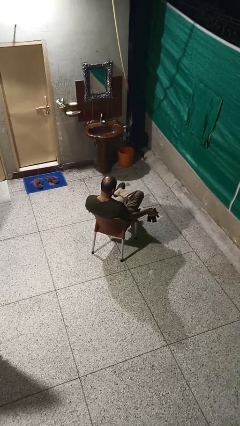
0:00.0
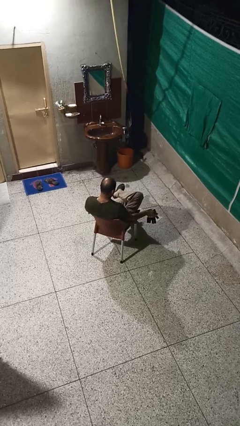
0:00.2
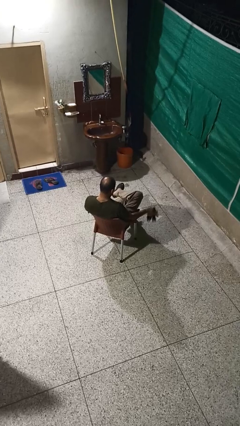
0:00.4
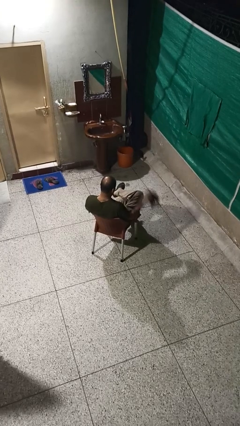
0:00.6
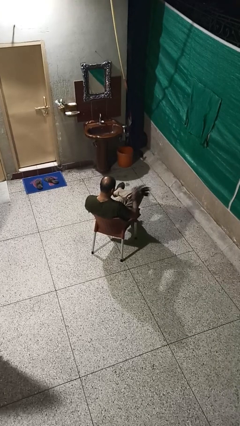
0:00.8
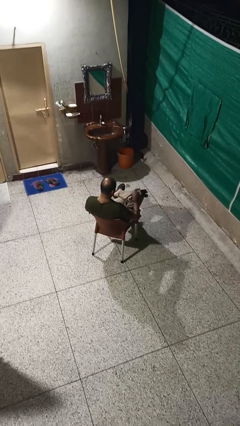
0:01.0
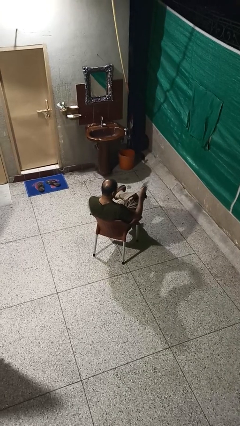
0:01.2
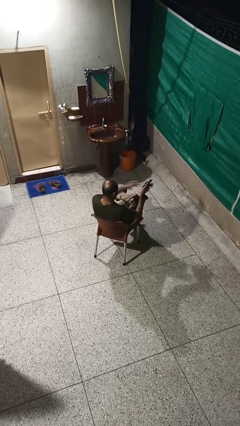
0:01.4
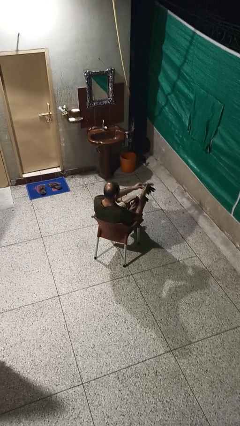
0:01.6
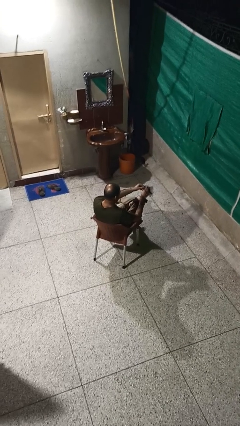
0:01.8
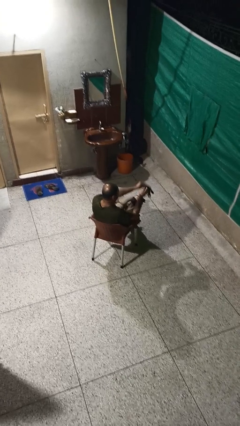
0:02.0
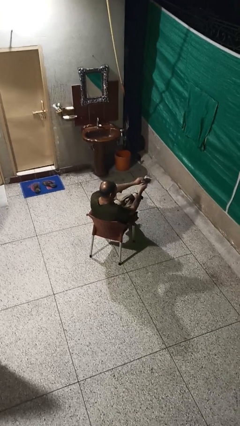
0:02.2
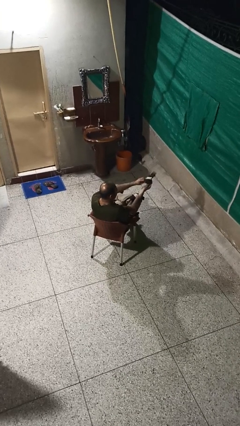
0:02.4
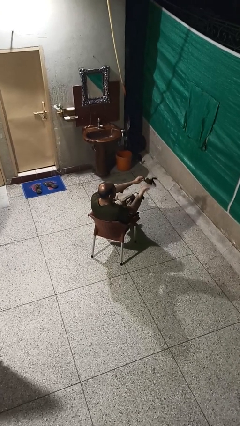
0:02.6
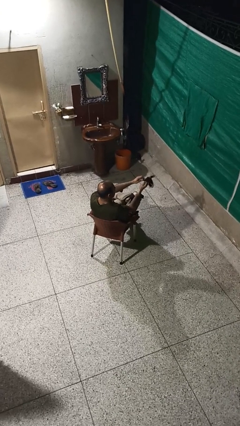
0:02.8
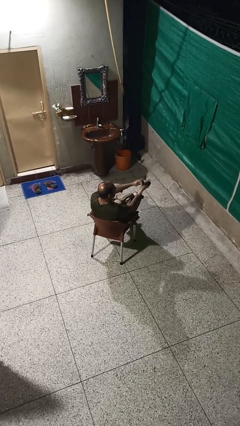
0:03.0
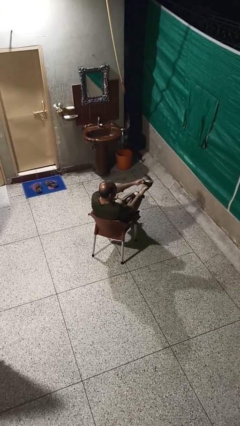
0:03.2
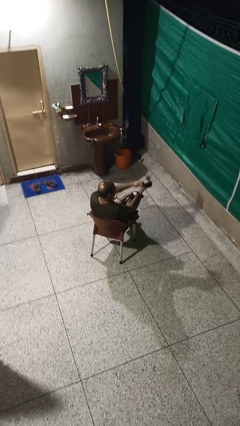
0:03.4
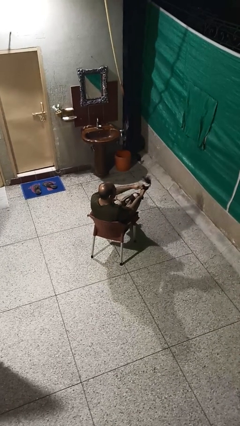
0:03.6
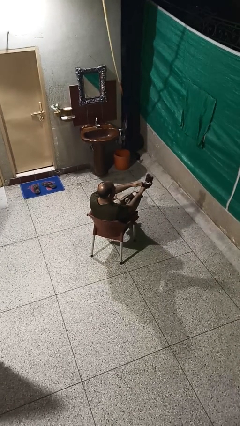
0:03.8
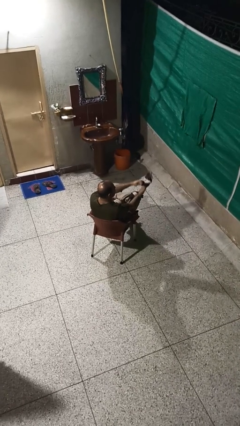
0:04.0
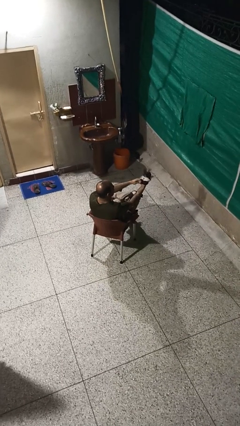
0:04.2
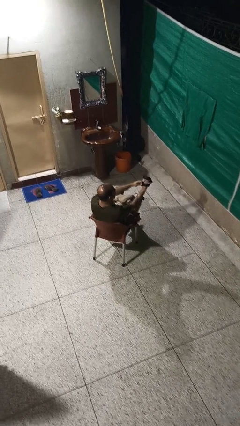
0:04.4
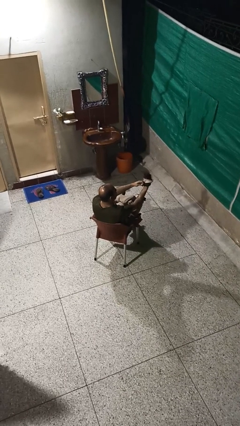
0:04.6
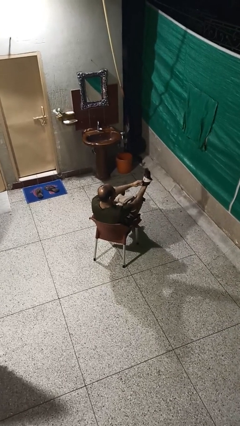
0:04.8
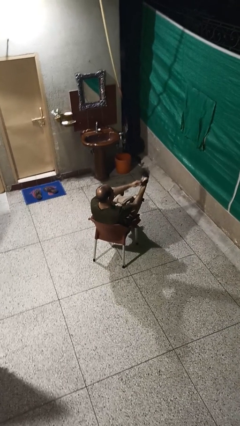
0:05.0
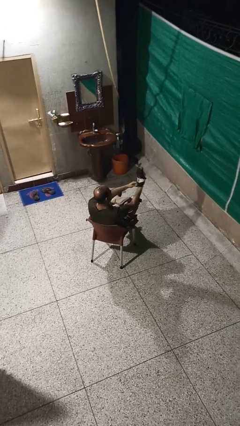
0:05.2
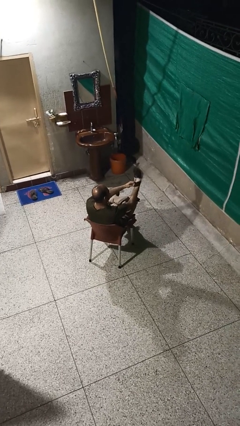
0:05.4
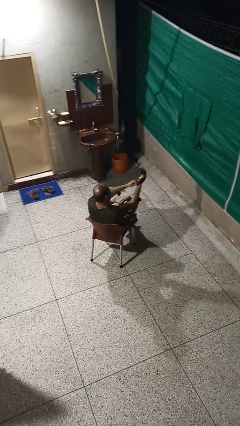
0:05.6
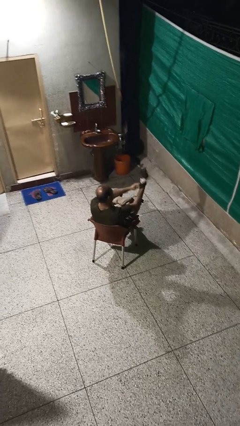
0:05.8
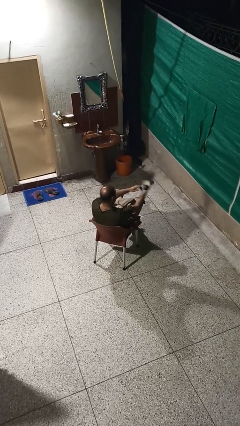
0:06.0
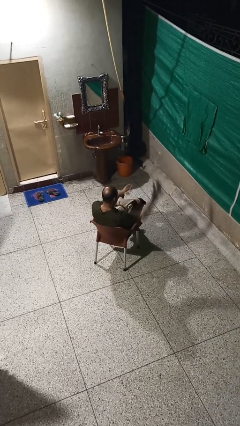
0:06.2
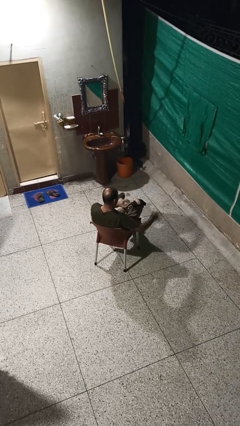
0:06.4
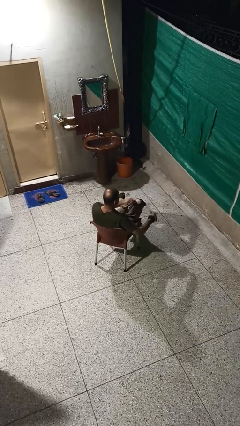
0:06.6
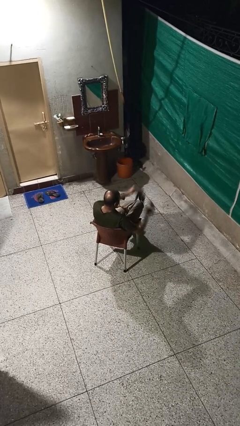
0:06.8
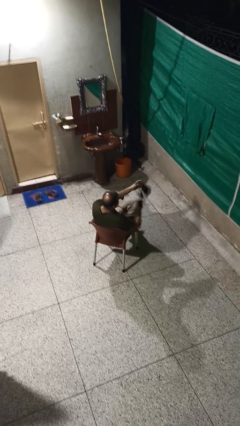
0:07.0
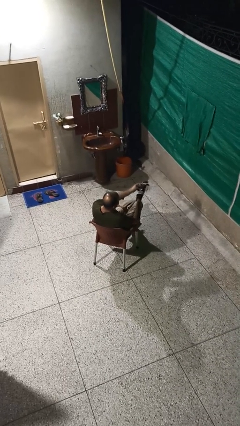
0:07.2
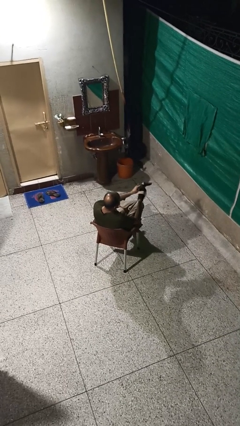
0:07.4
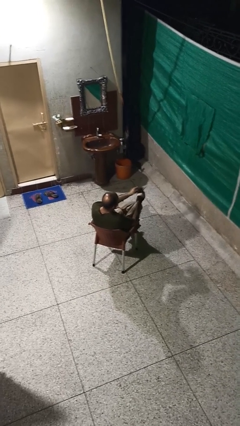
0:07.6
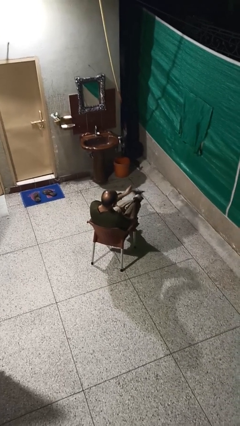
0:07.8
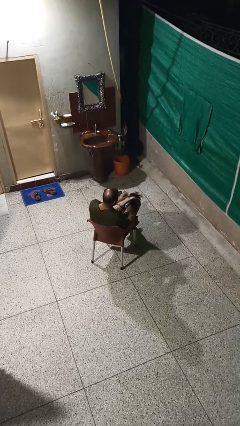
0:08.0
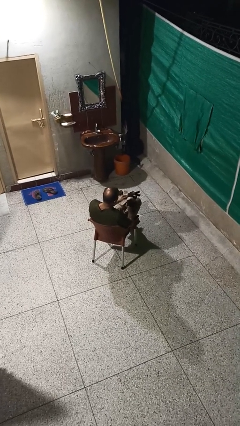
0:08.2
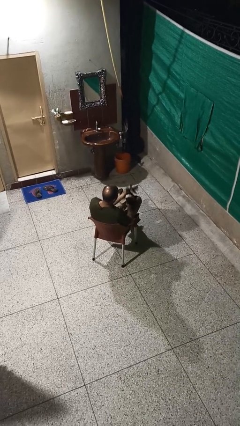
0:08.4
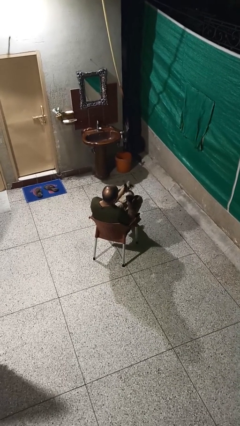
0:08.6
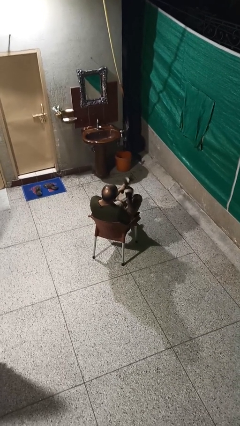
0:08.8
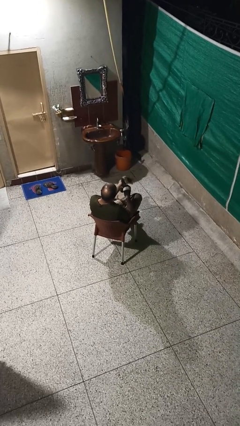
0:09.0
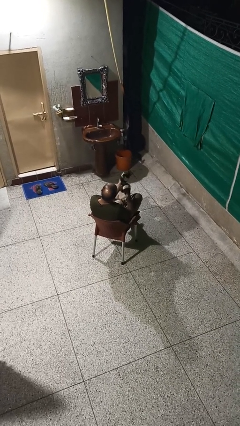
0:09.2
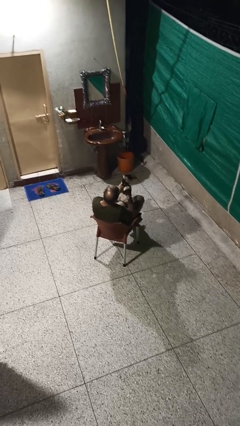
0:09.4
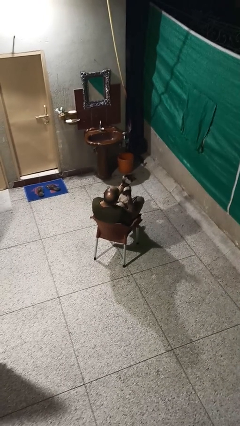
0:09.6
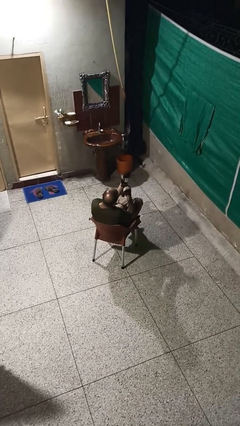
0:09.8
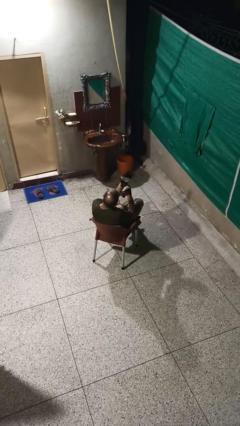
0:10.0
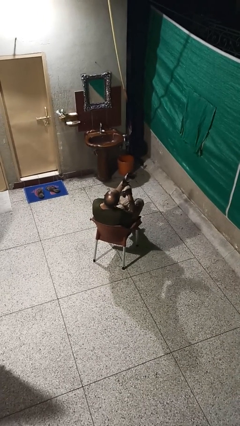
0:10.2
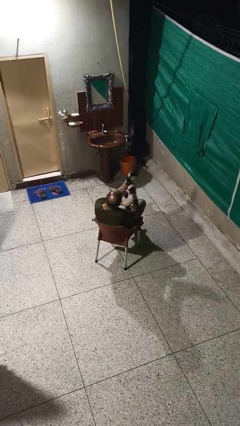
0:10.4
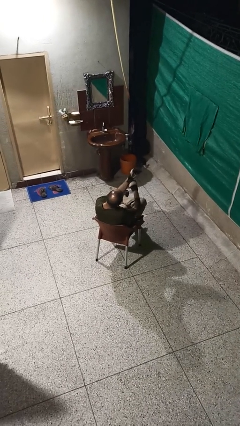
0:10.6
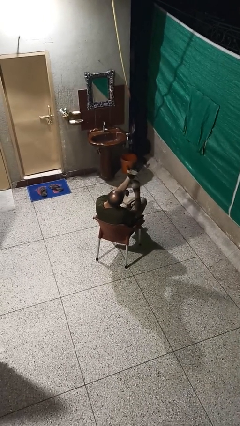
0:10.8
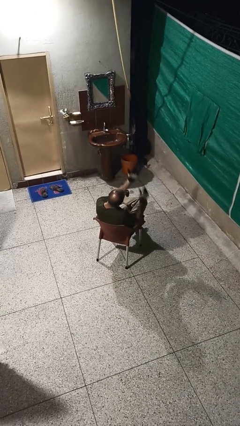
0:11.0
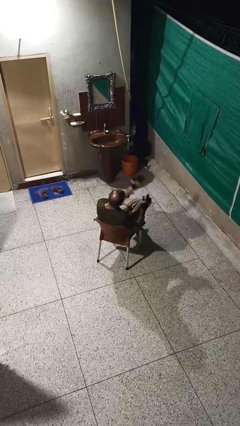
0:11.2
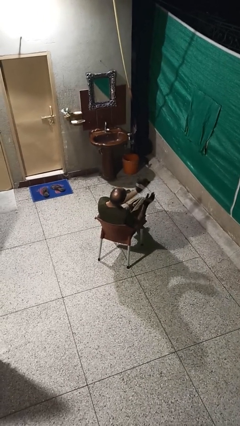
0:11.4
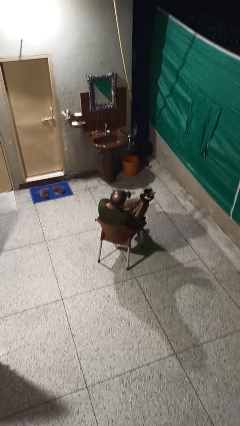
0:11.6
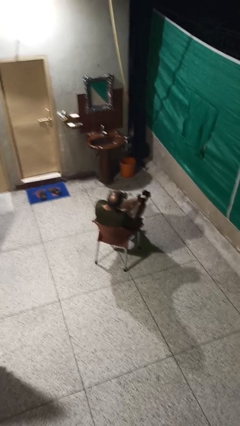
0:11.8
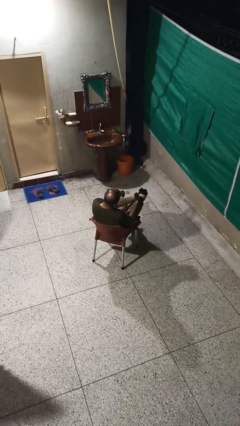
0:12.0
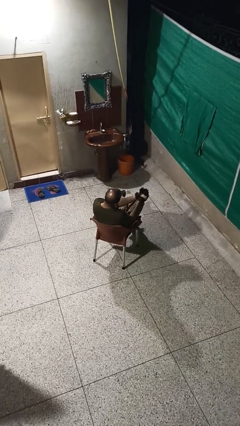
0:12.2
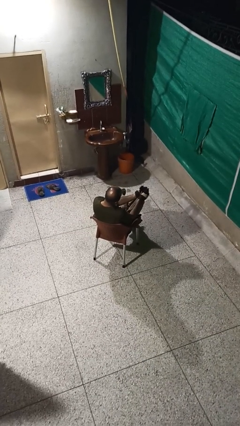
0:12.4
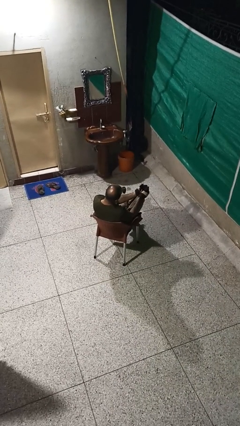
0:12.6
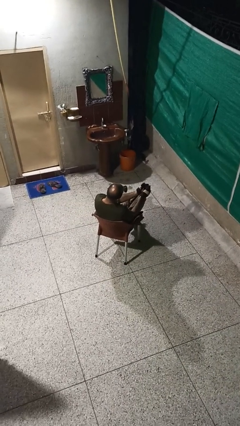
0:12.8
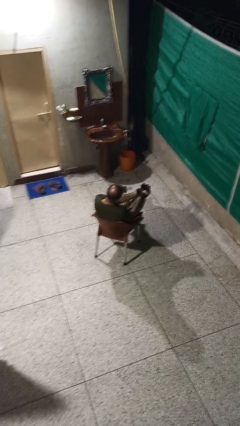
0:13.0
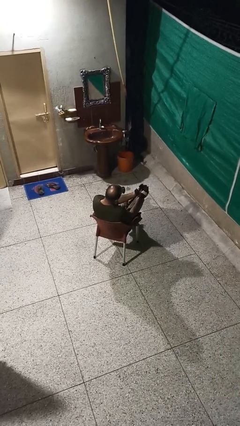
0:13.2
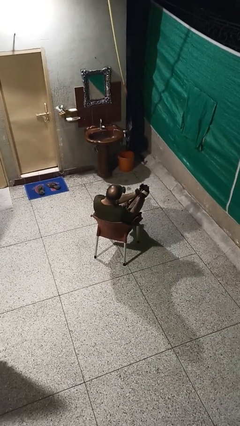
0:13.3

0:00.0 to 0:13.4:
person puts on gloves

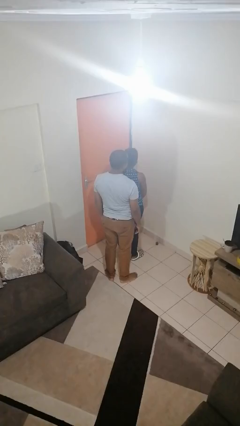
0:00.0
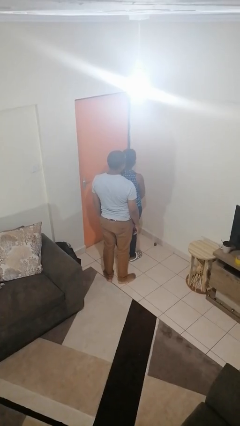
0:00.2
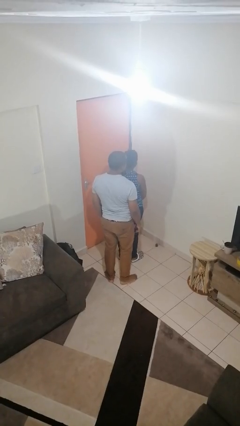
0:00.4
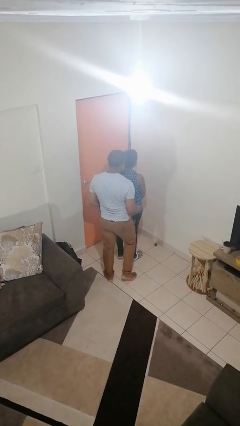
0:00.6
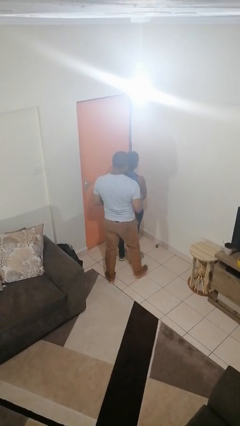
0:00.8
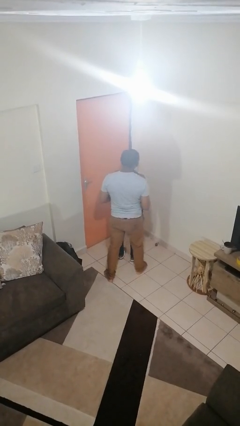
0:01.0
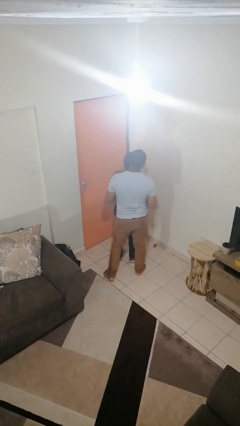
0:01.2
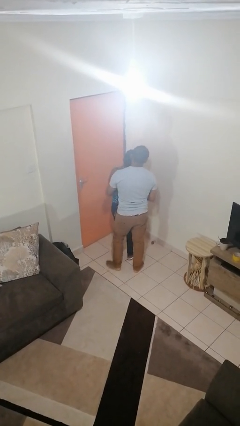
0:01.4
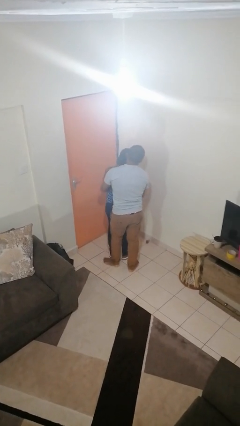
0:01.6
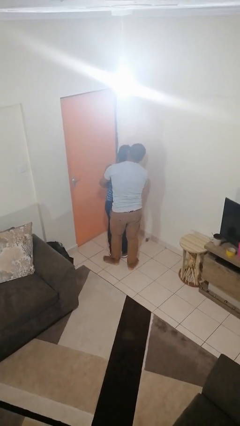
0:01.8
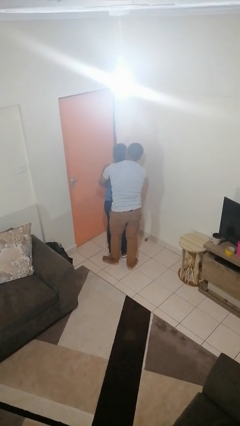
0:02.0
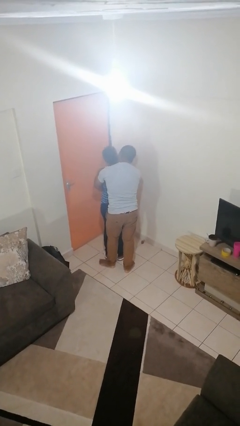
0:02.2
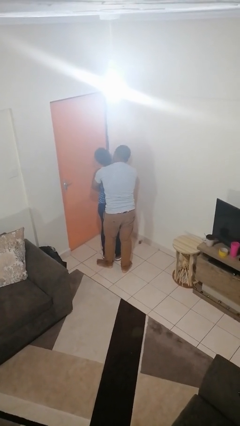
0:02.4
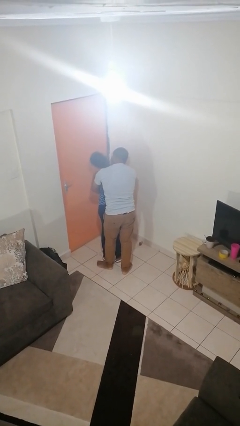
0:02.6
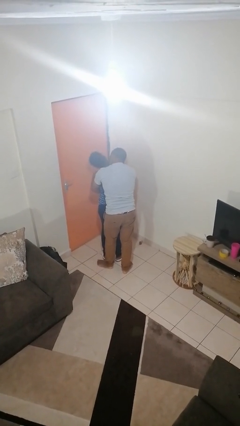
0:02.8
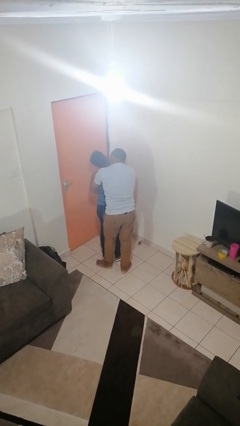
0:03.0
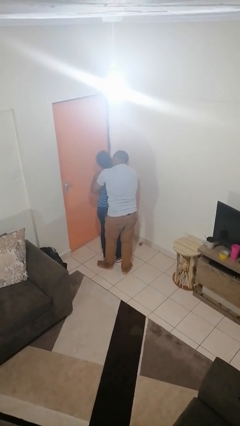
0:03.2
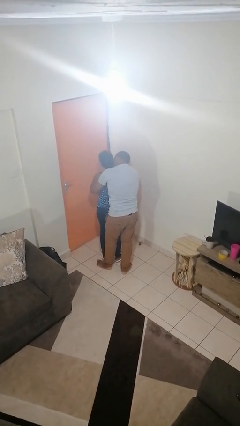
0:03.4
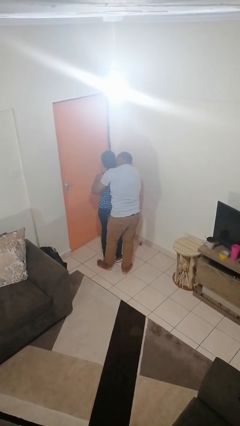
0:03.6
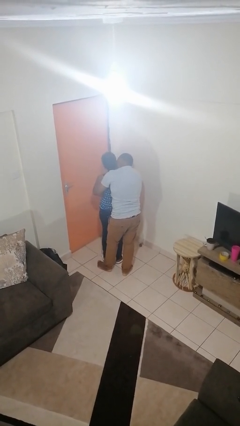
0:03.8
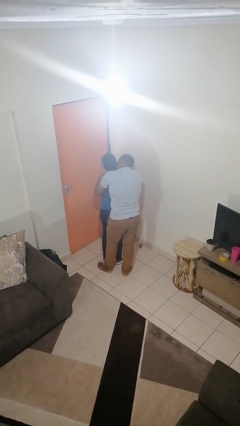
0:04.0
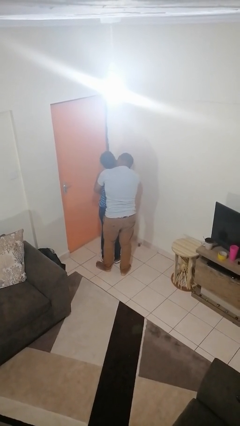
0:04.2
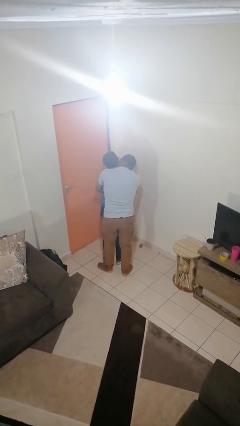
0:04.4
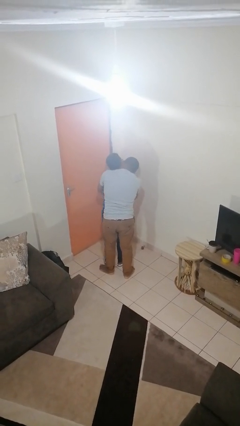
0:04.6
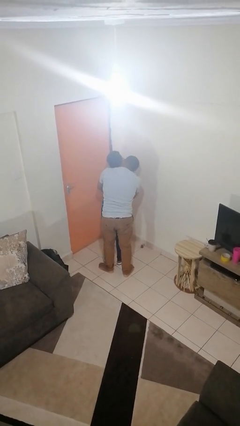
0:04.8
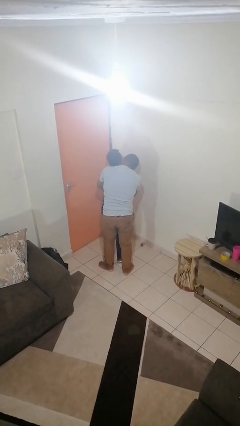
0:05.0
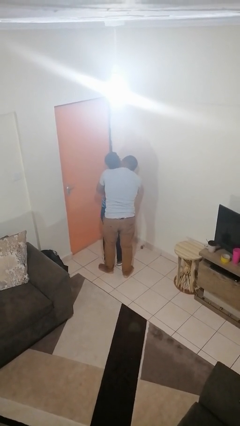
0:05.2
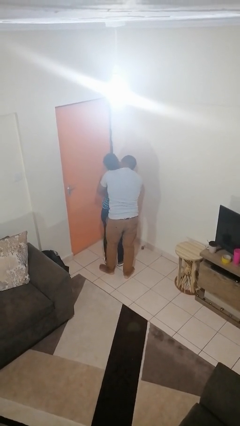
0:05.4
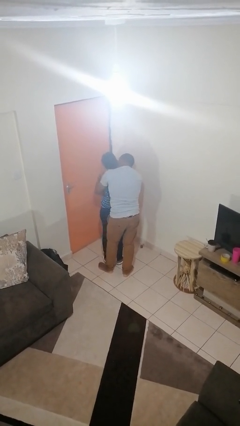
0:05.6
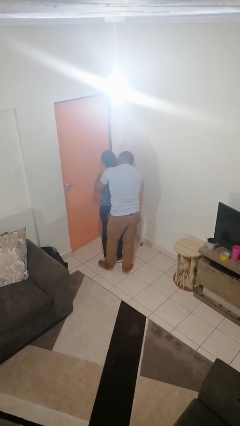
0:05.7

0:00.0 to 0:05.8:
person hugs person from behind
